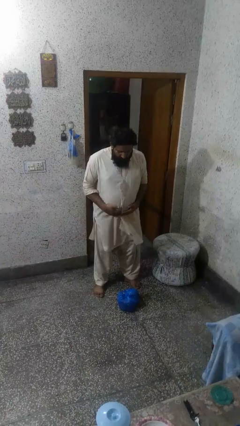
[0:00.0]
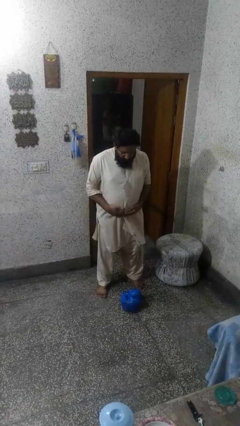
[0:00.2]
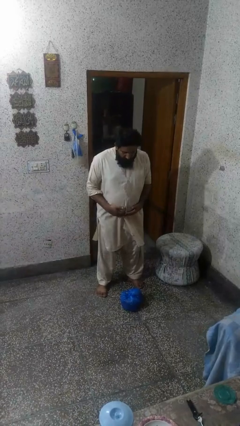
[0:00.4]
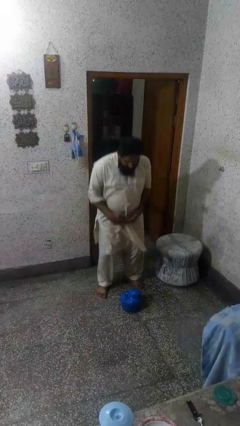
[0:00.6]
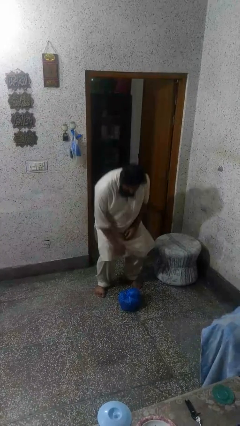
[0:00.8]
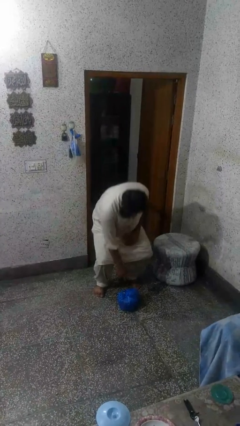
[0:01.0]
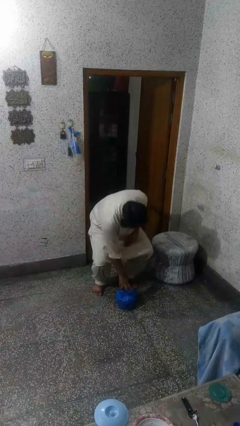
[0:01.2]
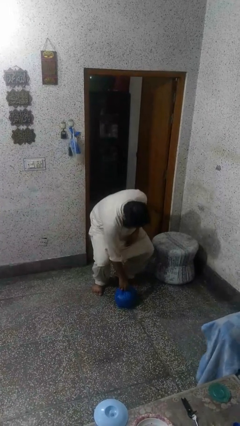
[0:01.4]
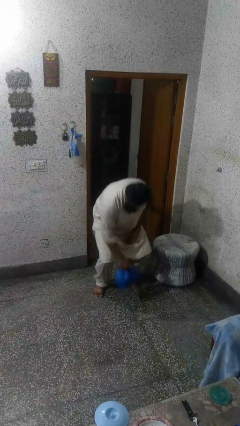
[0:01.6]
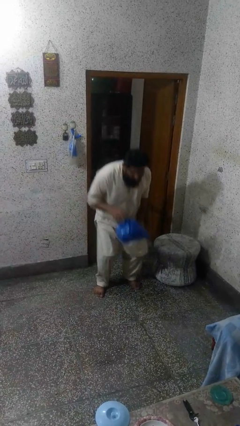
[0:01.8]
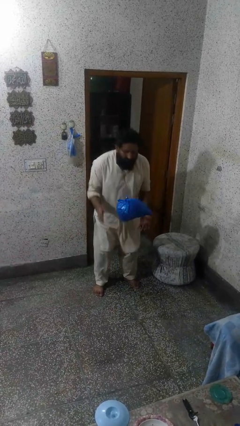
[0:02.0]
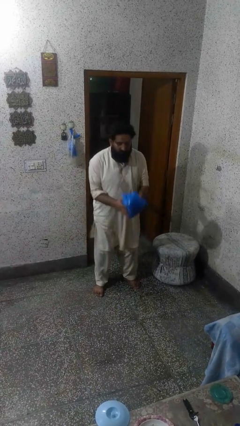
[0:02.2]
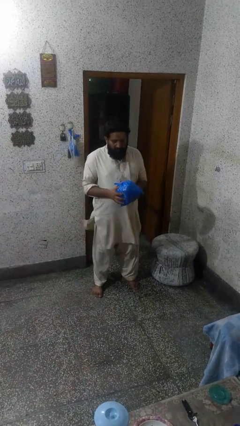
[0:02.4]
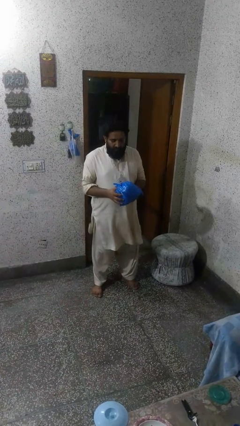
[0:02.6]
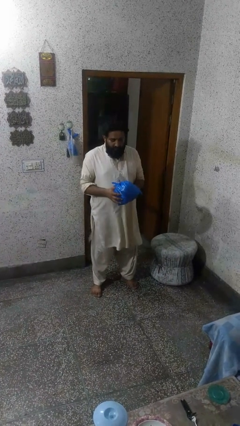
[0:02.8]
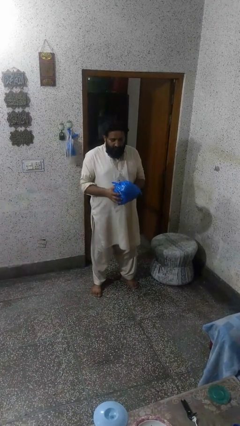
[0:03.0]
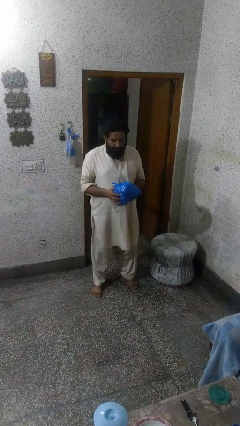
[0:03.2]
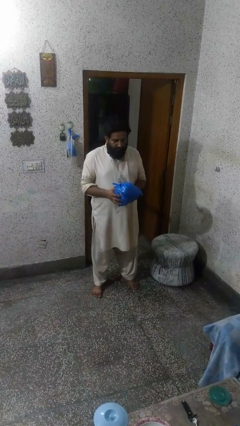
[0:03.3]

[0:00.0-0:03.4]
person picks up object from floor

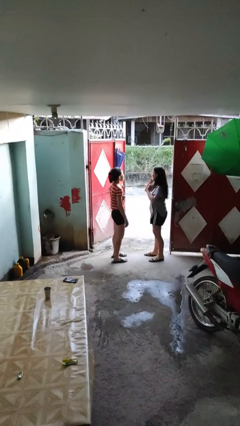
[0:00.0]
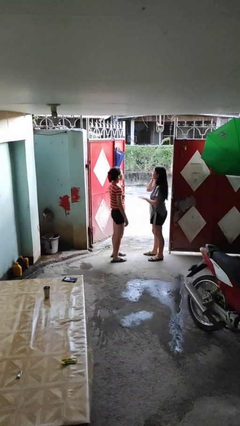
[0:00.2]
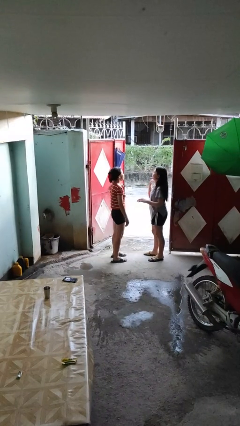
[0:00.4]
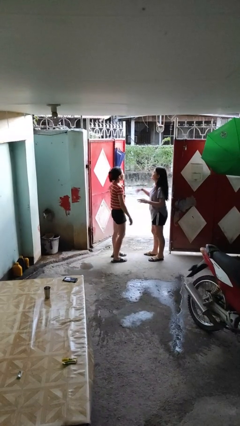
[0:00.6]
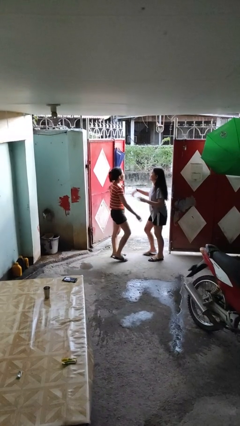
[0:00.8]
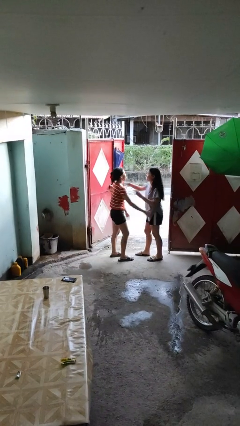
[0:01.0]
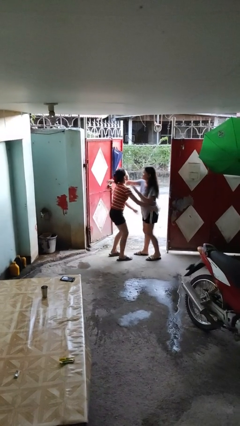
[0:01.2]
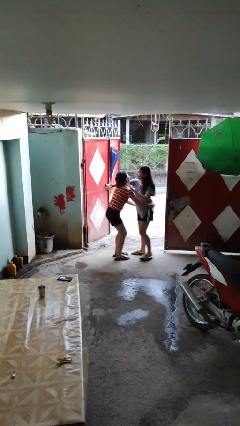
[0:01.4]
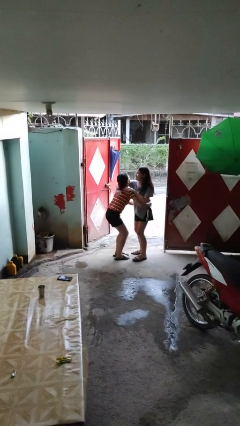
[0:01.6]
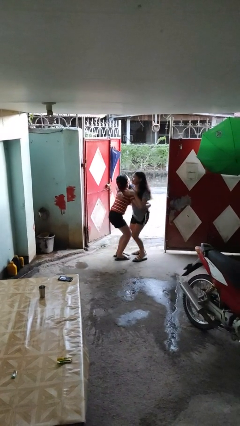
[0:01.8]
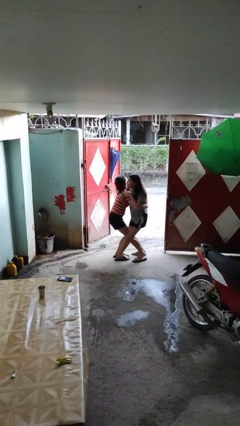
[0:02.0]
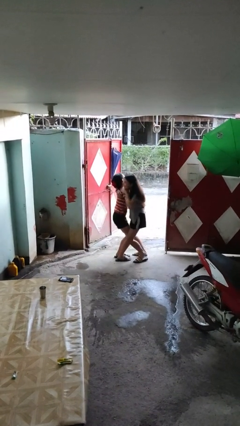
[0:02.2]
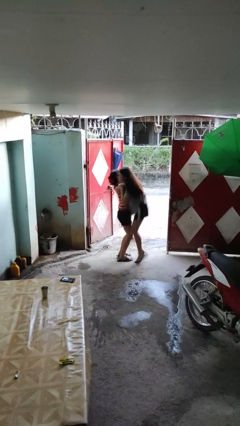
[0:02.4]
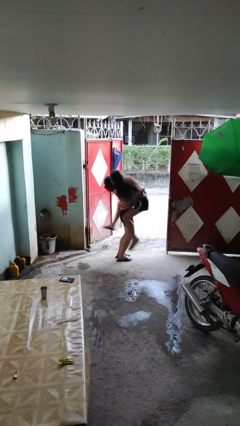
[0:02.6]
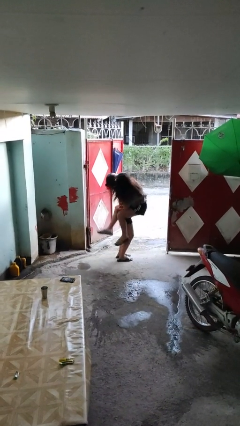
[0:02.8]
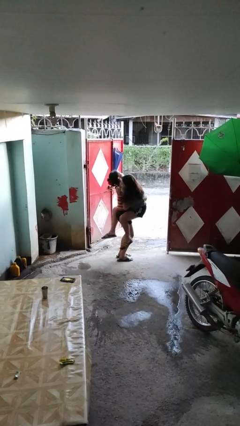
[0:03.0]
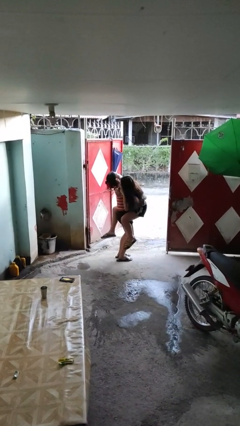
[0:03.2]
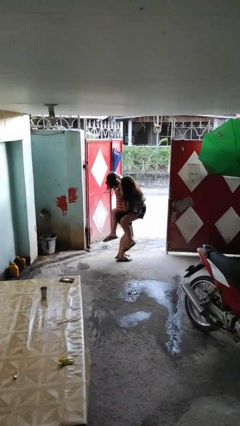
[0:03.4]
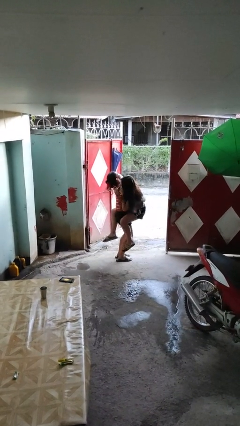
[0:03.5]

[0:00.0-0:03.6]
person picks up person

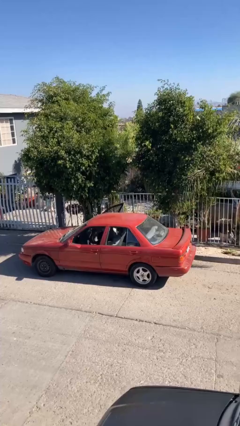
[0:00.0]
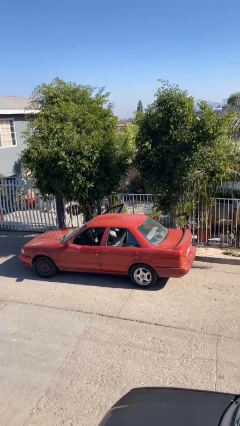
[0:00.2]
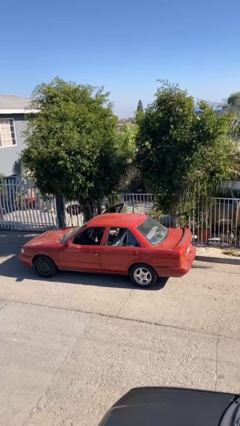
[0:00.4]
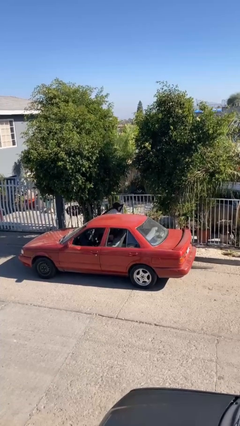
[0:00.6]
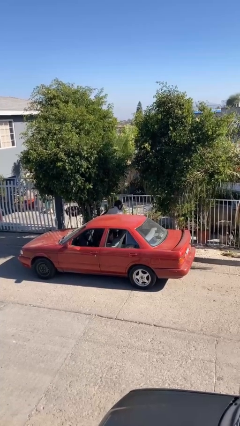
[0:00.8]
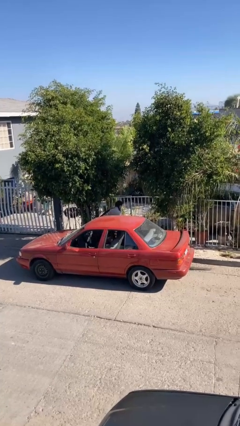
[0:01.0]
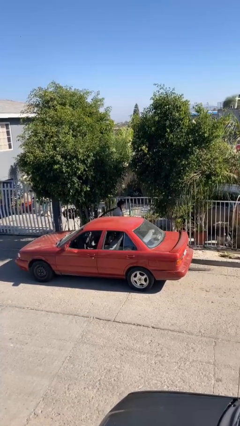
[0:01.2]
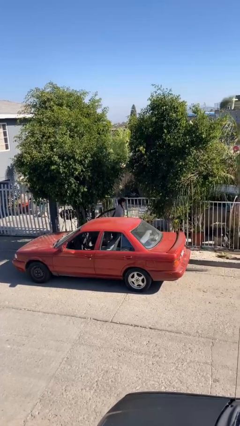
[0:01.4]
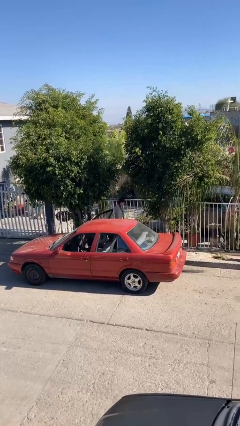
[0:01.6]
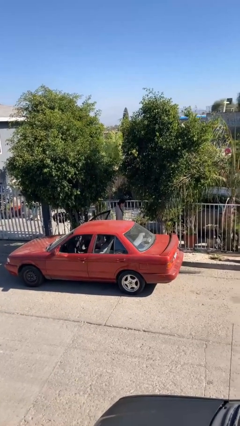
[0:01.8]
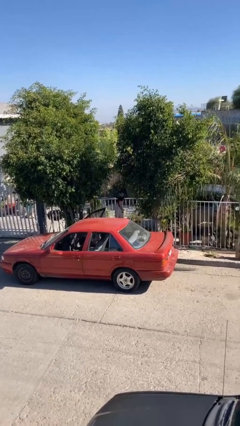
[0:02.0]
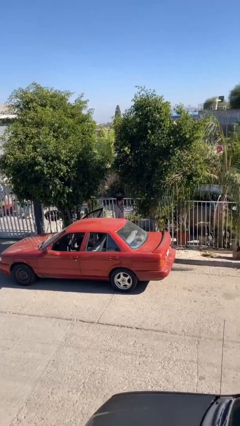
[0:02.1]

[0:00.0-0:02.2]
person exits car

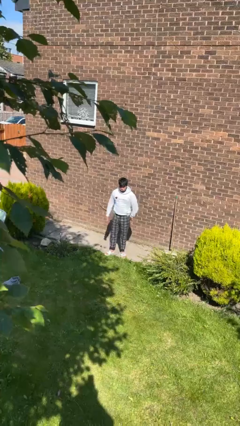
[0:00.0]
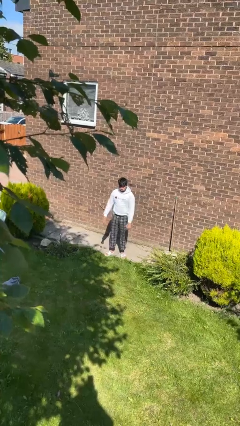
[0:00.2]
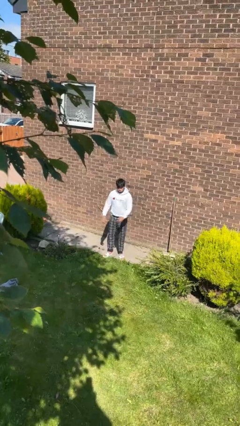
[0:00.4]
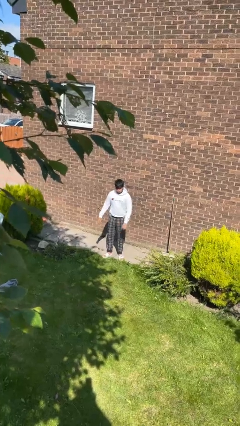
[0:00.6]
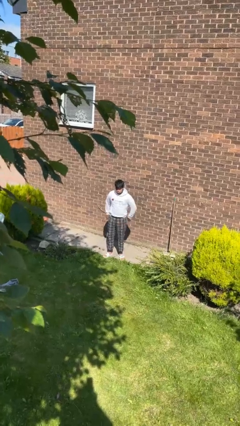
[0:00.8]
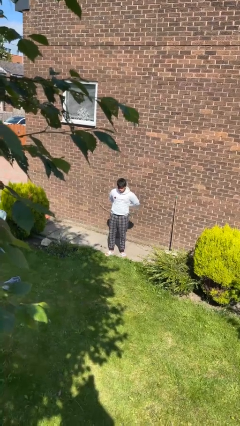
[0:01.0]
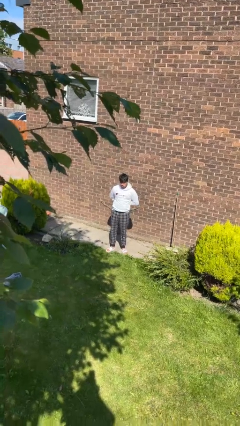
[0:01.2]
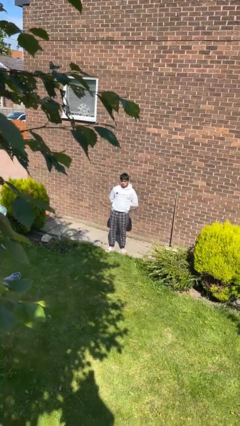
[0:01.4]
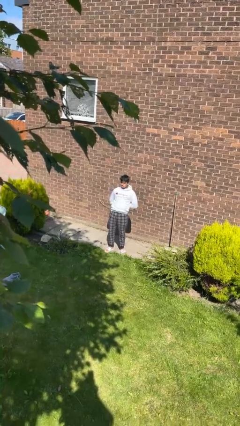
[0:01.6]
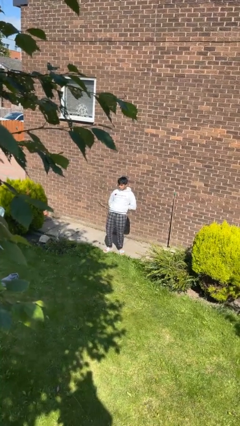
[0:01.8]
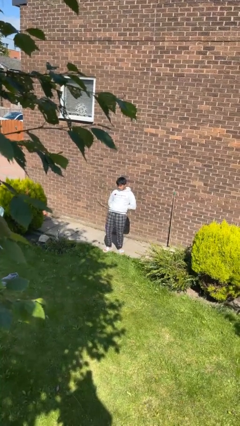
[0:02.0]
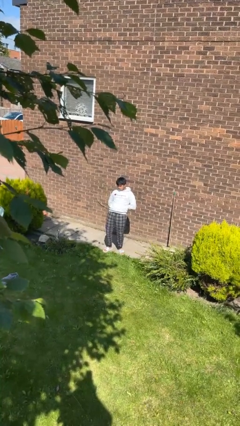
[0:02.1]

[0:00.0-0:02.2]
person stretches back

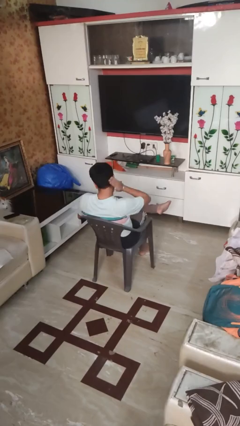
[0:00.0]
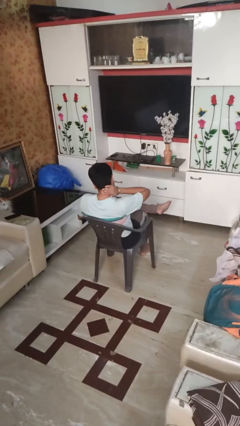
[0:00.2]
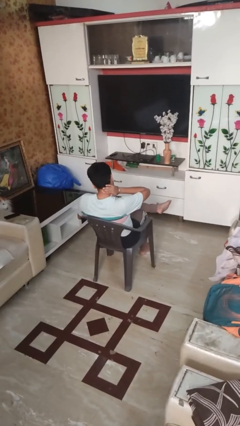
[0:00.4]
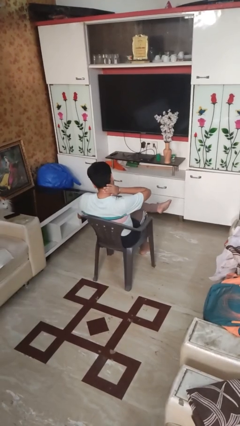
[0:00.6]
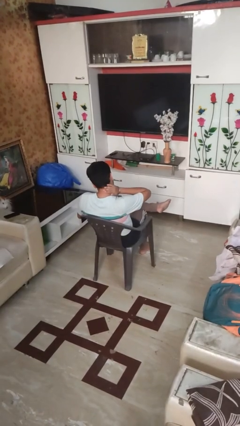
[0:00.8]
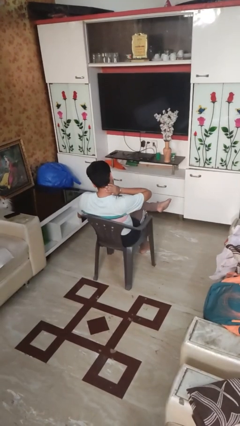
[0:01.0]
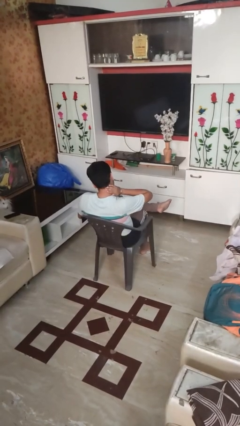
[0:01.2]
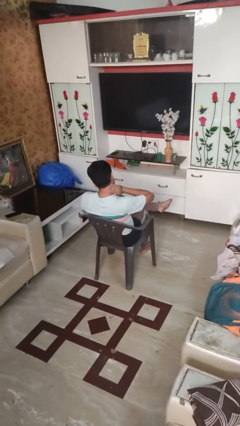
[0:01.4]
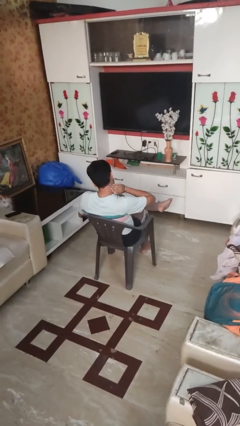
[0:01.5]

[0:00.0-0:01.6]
person swats bug

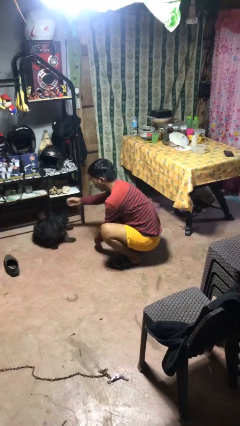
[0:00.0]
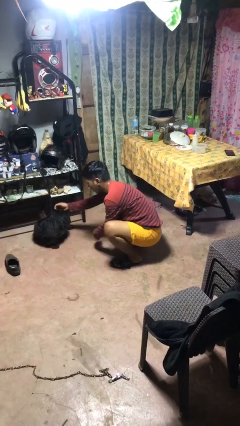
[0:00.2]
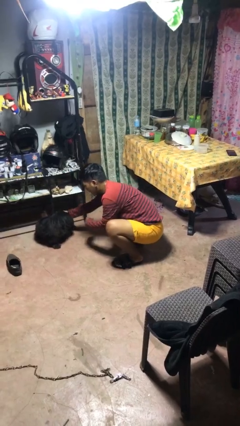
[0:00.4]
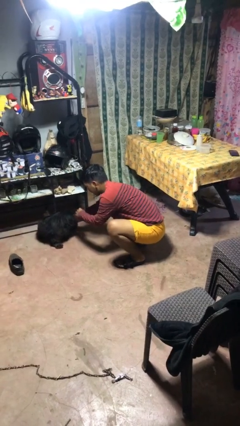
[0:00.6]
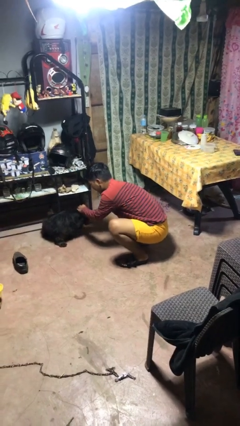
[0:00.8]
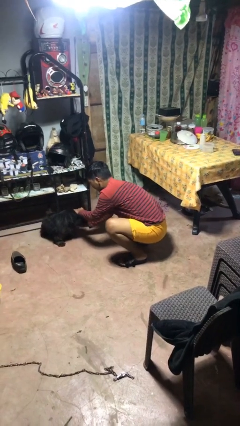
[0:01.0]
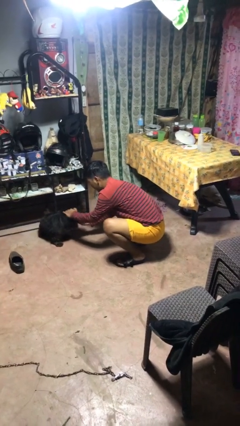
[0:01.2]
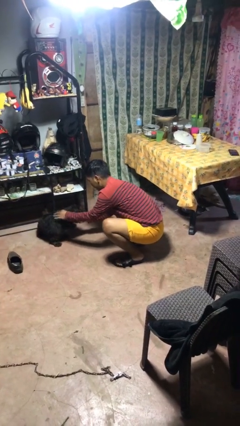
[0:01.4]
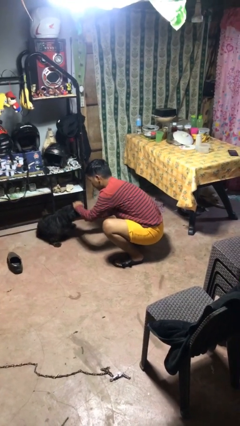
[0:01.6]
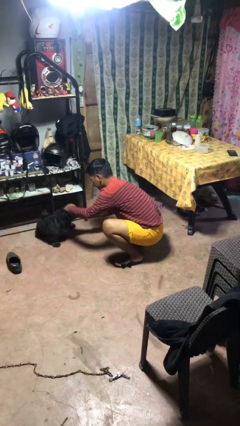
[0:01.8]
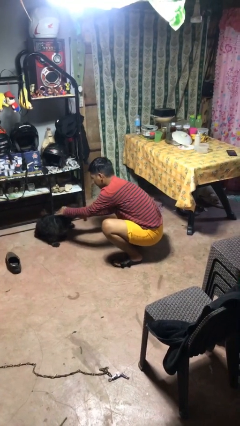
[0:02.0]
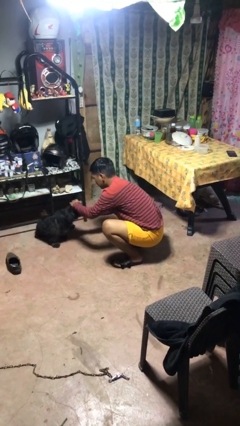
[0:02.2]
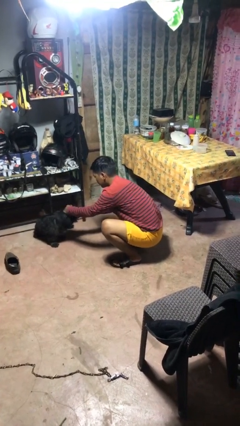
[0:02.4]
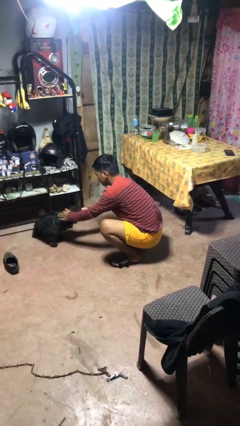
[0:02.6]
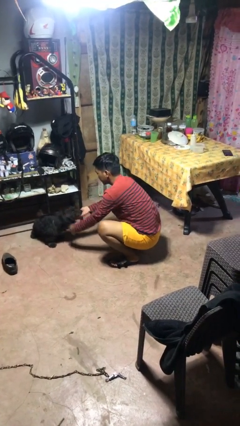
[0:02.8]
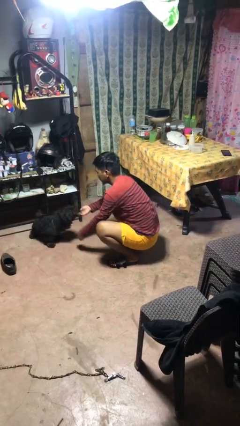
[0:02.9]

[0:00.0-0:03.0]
person pets dog

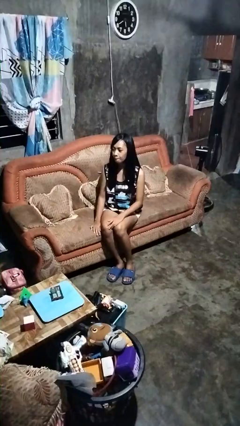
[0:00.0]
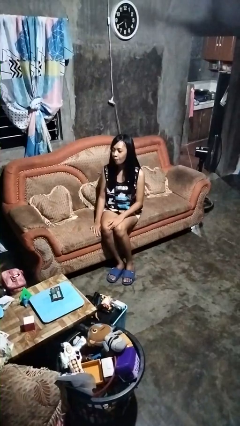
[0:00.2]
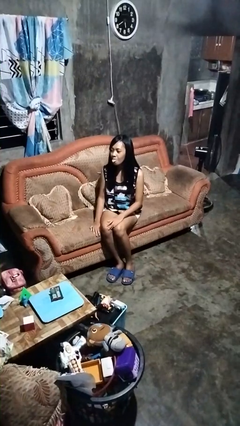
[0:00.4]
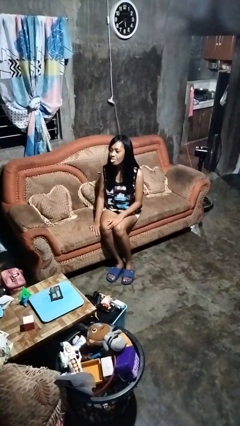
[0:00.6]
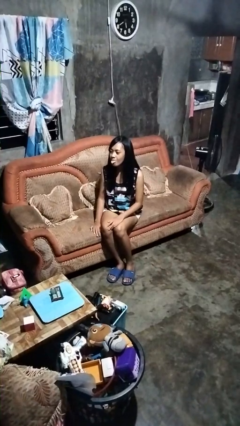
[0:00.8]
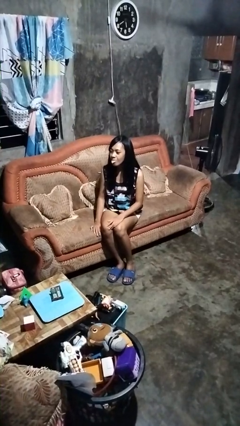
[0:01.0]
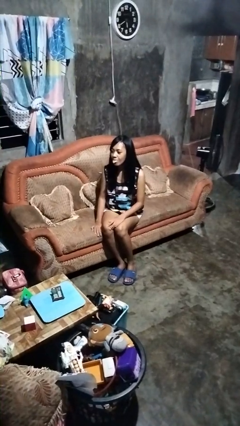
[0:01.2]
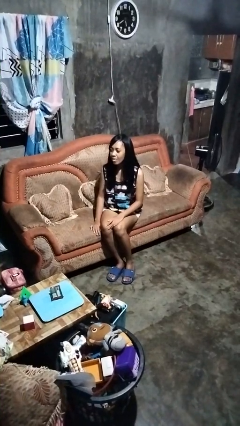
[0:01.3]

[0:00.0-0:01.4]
person sticks out tongue
